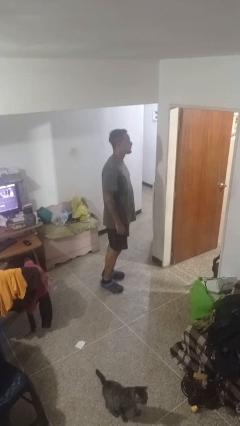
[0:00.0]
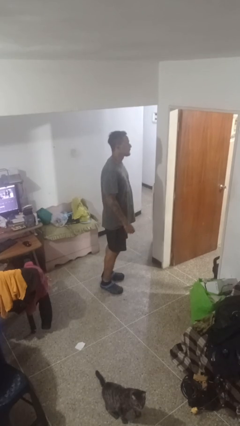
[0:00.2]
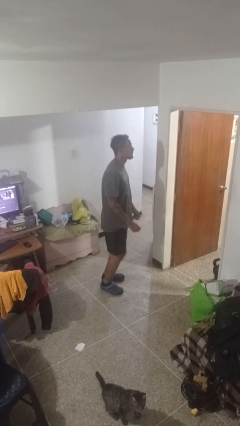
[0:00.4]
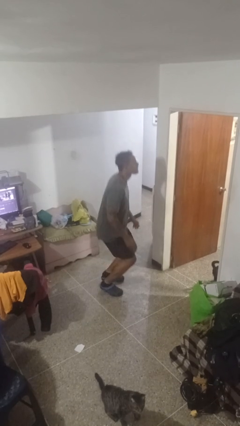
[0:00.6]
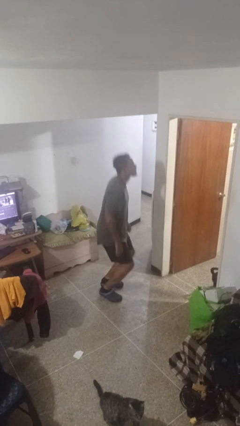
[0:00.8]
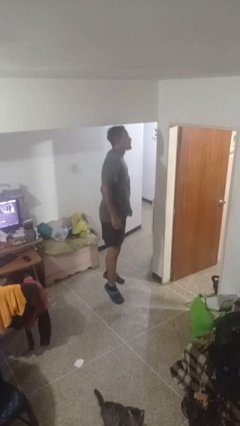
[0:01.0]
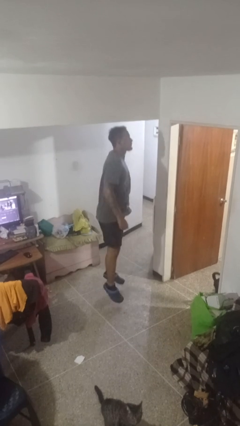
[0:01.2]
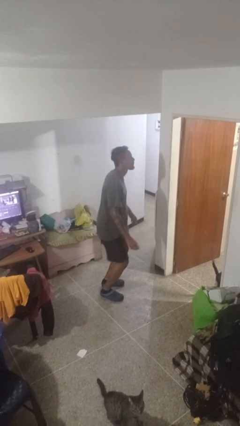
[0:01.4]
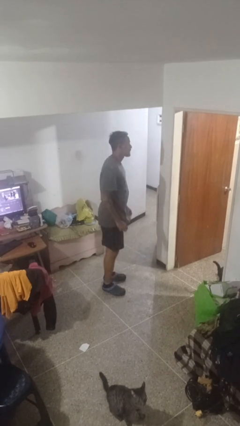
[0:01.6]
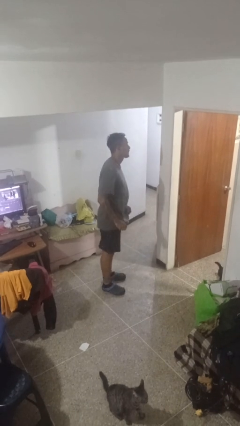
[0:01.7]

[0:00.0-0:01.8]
person jumps

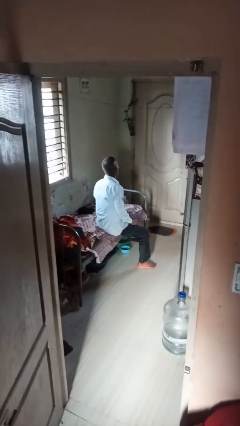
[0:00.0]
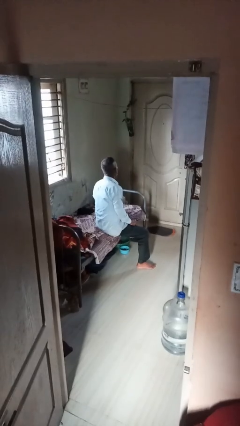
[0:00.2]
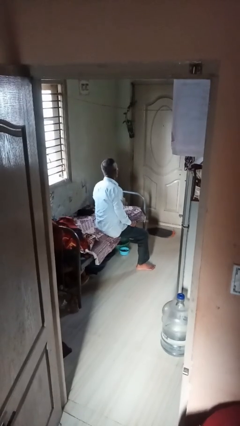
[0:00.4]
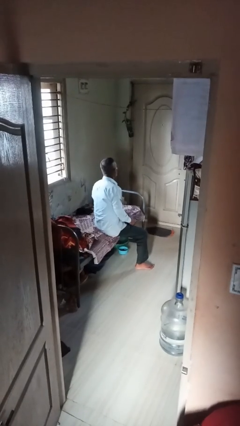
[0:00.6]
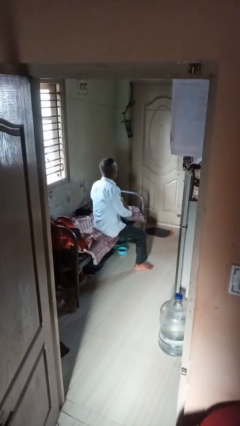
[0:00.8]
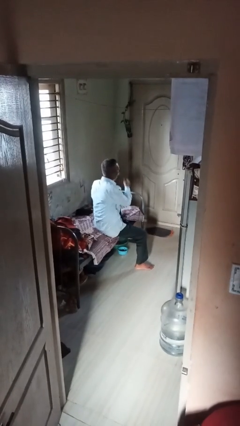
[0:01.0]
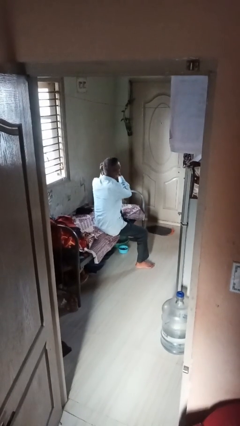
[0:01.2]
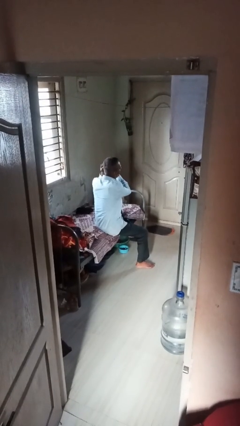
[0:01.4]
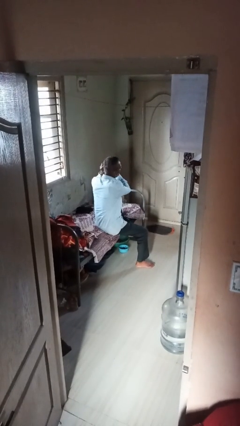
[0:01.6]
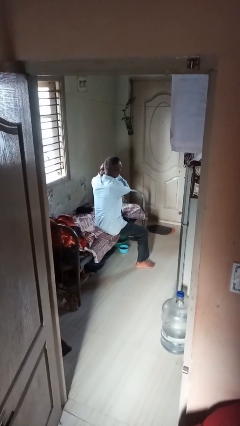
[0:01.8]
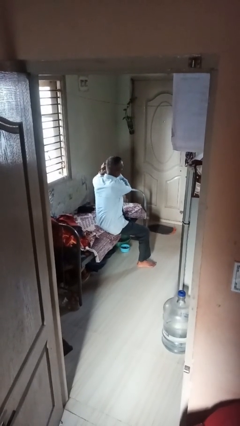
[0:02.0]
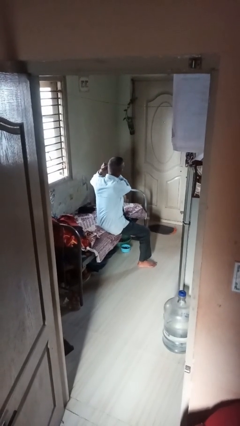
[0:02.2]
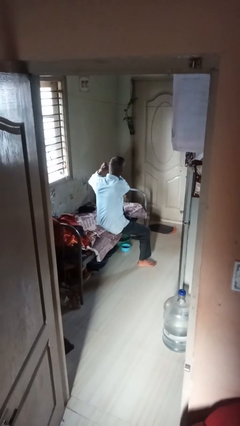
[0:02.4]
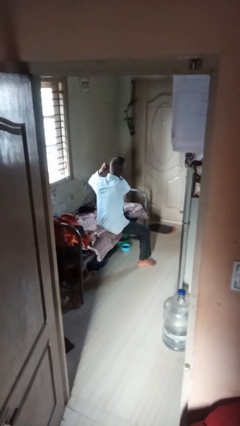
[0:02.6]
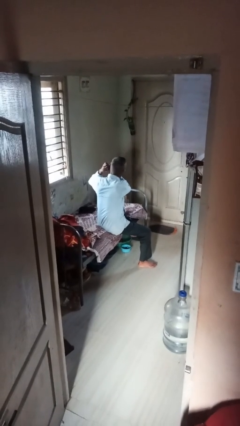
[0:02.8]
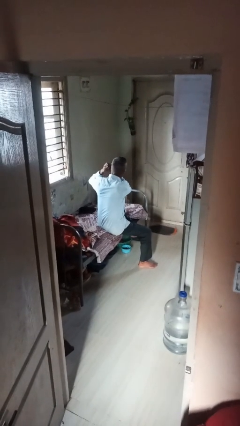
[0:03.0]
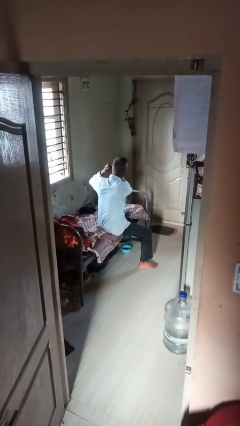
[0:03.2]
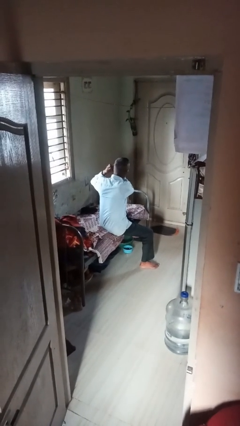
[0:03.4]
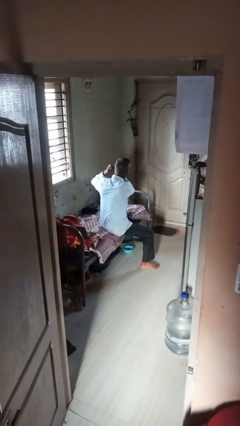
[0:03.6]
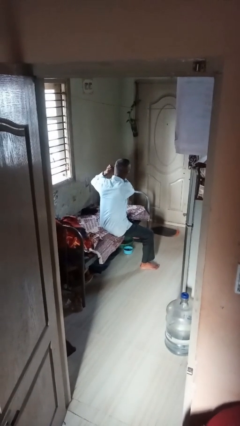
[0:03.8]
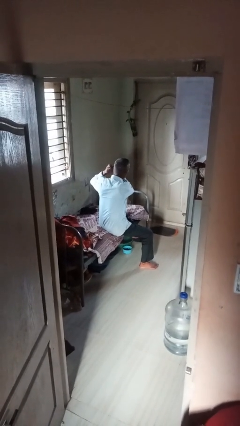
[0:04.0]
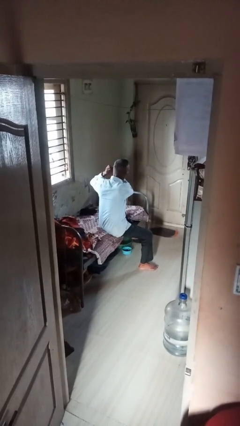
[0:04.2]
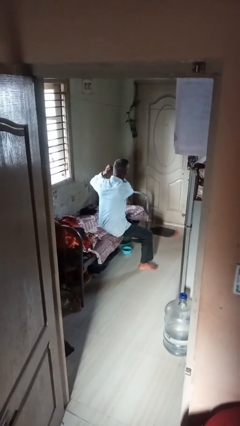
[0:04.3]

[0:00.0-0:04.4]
person puts on earrings

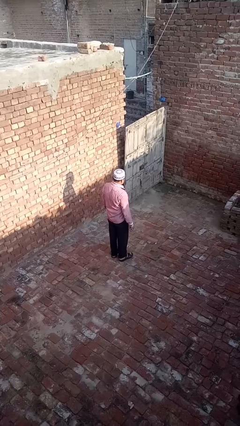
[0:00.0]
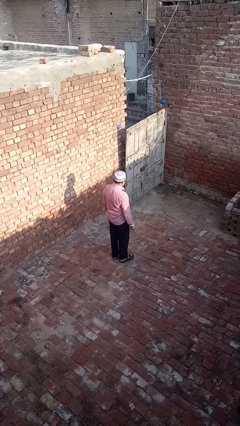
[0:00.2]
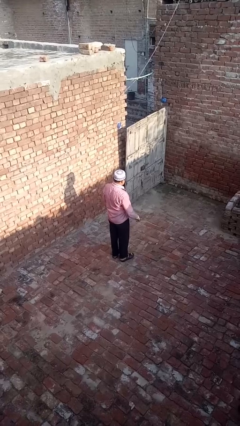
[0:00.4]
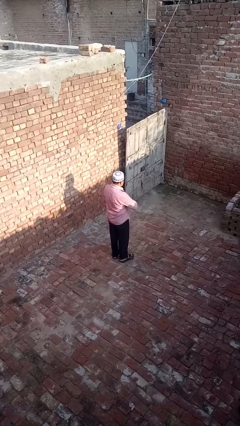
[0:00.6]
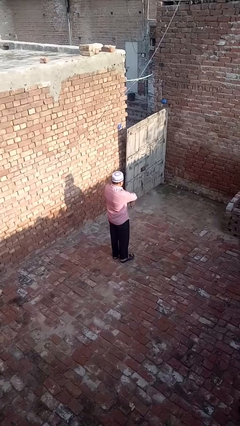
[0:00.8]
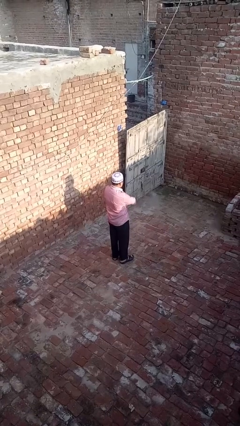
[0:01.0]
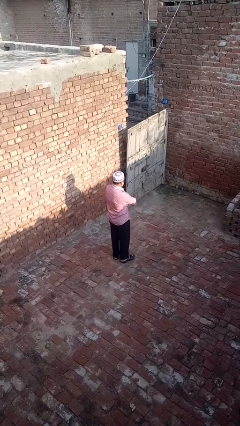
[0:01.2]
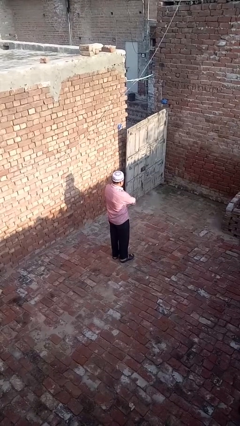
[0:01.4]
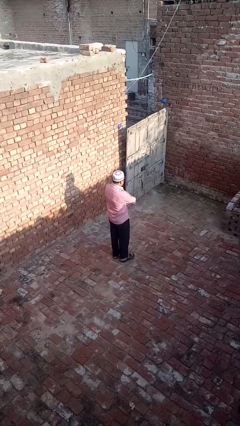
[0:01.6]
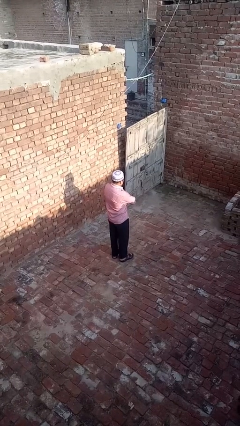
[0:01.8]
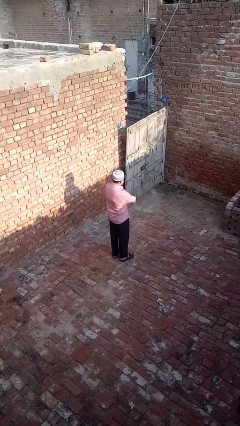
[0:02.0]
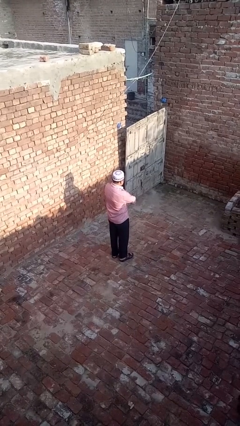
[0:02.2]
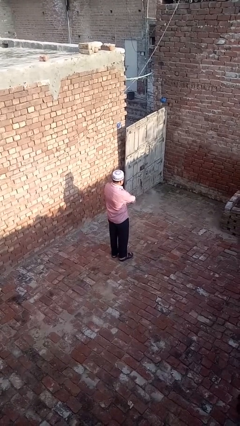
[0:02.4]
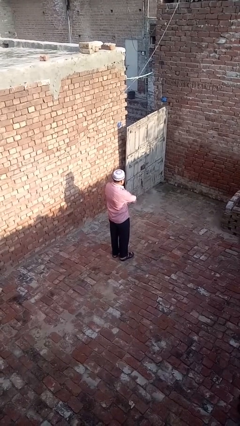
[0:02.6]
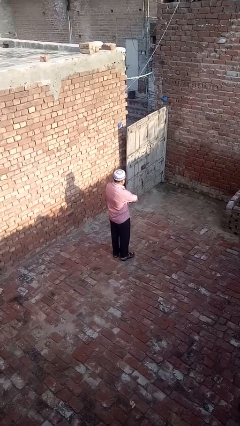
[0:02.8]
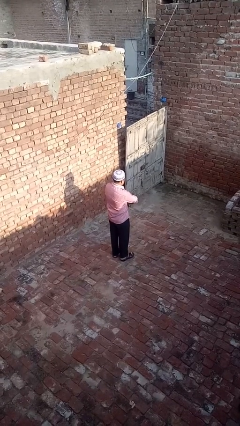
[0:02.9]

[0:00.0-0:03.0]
person crosses arms

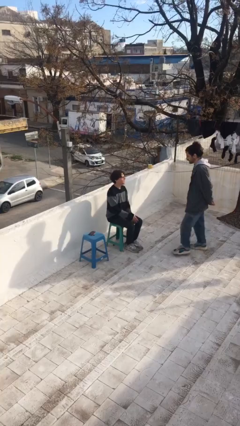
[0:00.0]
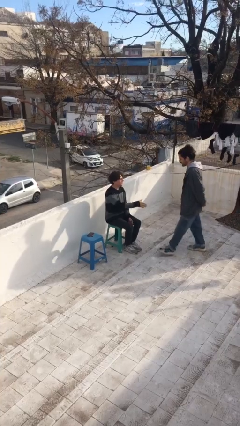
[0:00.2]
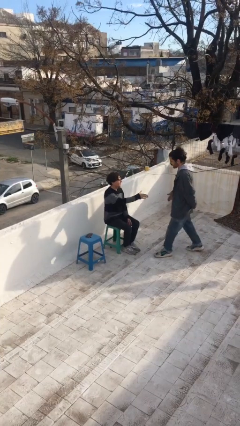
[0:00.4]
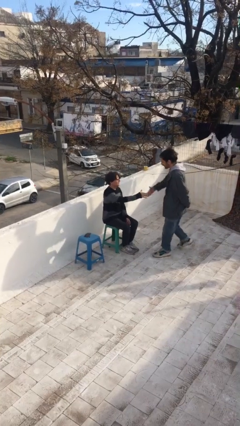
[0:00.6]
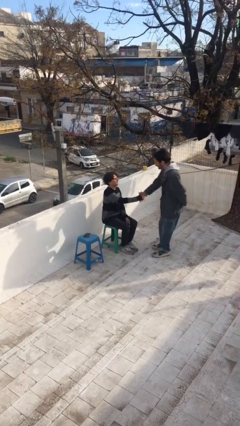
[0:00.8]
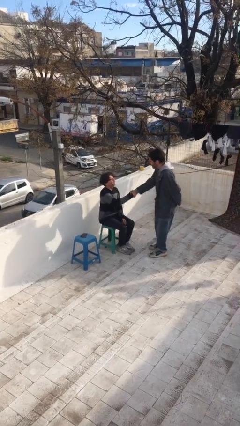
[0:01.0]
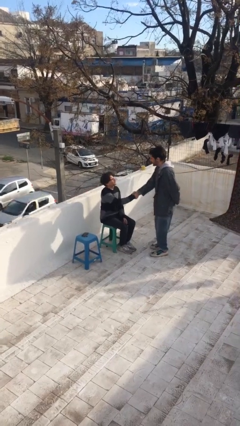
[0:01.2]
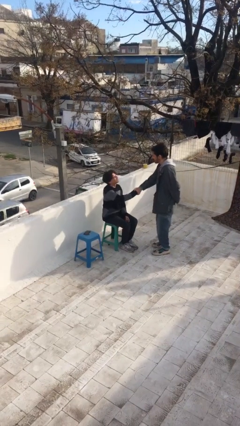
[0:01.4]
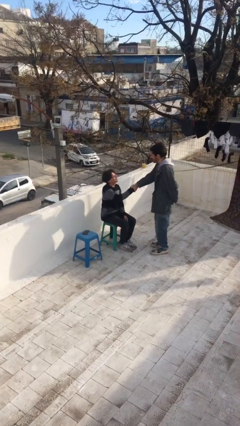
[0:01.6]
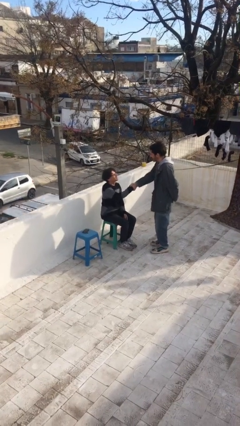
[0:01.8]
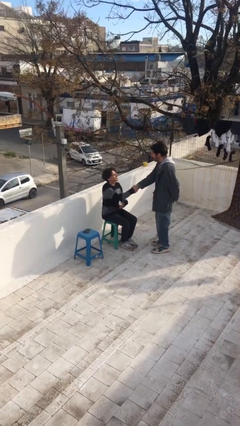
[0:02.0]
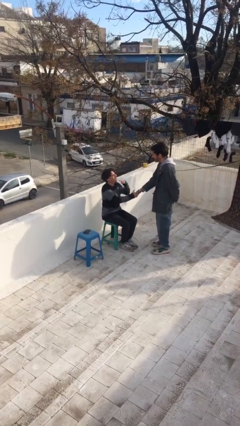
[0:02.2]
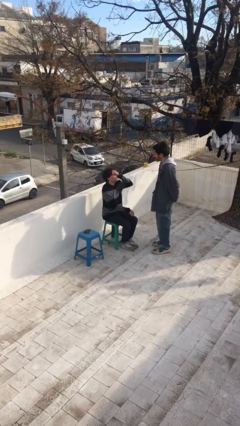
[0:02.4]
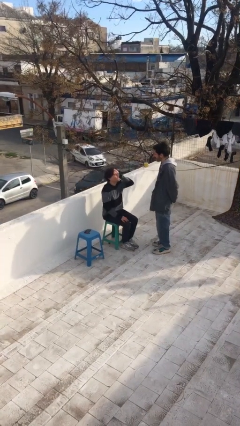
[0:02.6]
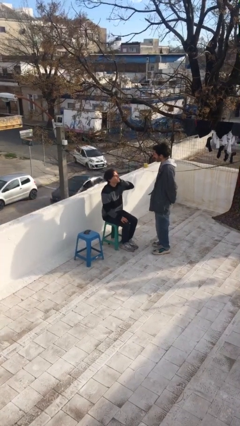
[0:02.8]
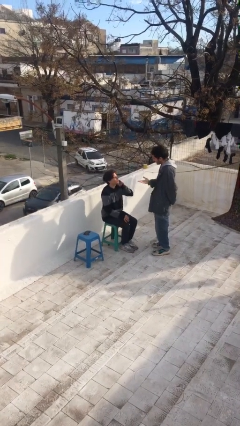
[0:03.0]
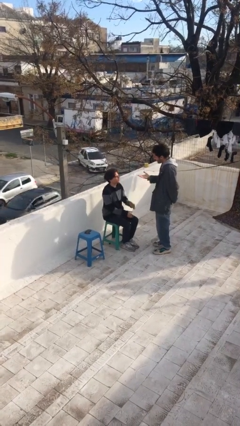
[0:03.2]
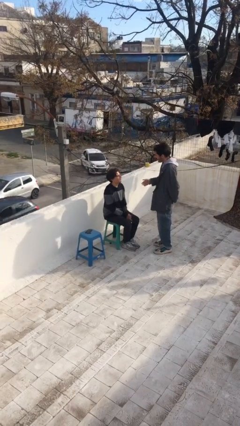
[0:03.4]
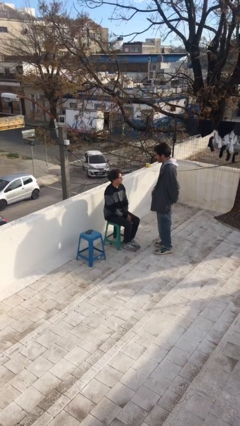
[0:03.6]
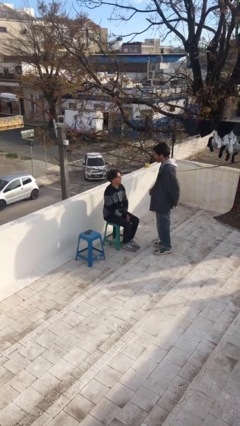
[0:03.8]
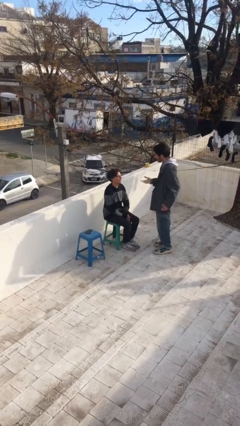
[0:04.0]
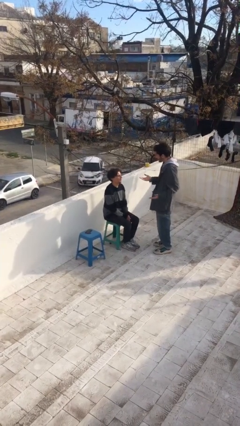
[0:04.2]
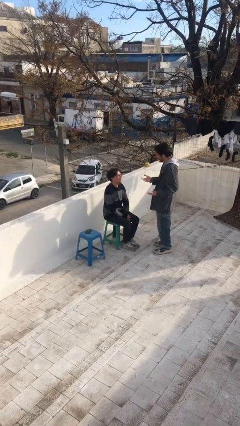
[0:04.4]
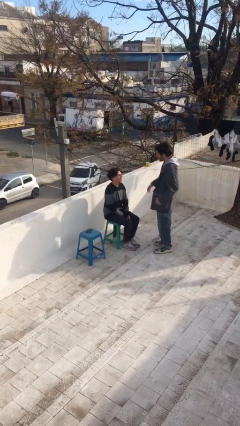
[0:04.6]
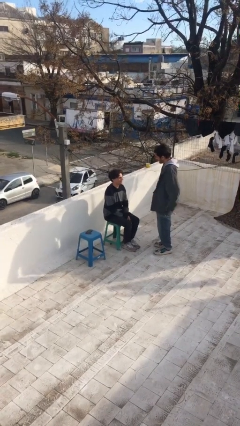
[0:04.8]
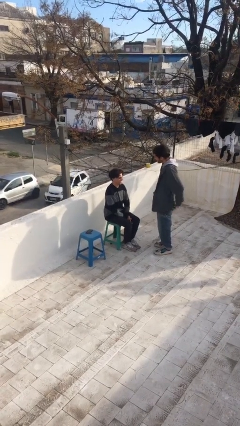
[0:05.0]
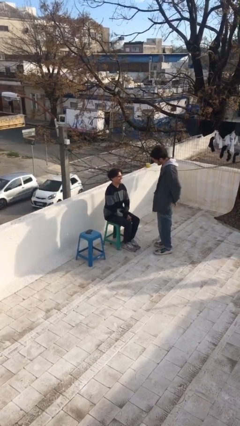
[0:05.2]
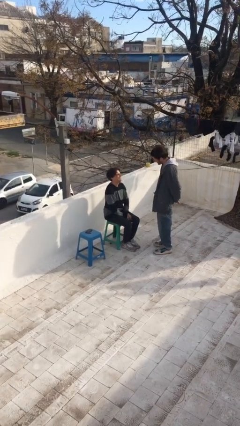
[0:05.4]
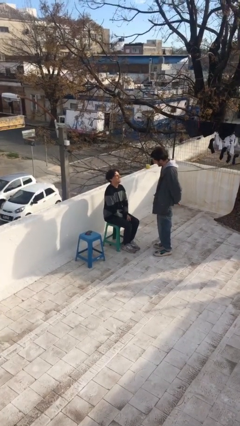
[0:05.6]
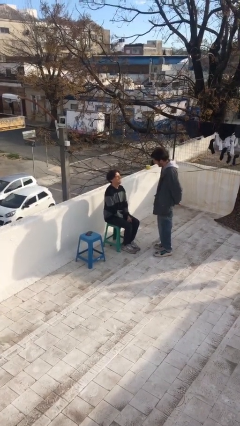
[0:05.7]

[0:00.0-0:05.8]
person shakes hand

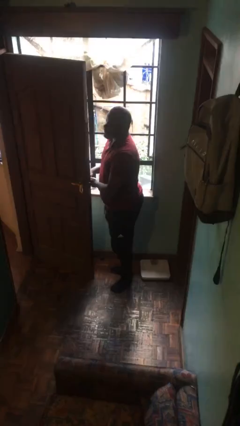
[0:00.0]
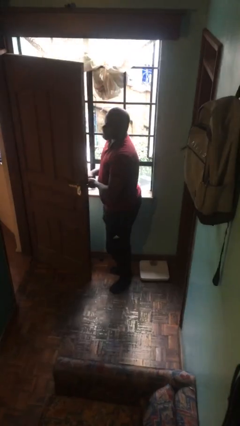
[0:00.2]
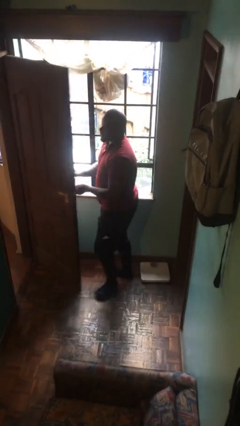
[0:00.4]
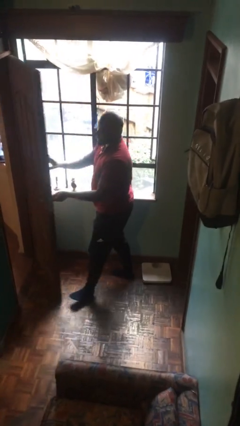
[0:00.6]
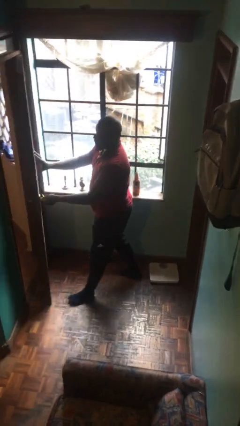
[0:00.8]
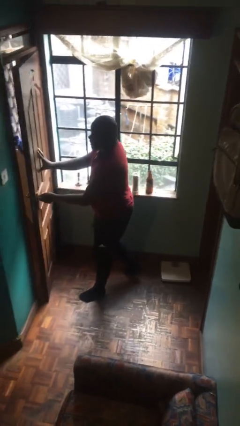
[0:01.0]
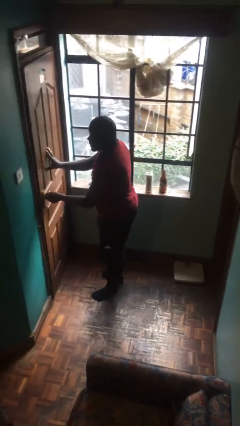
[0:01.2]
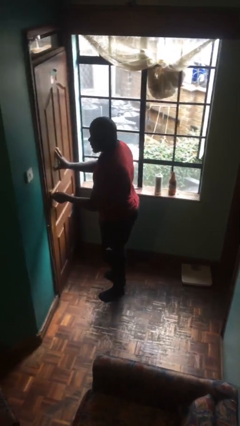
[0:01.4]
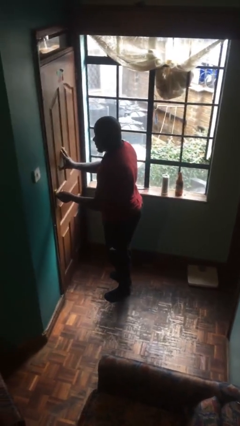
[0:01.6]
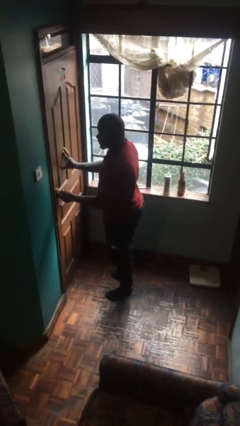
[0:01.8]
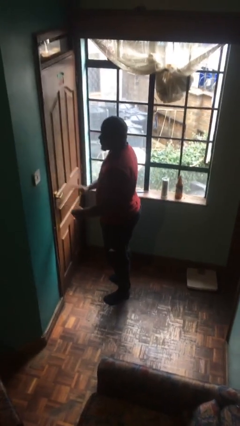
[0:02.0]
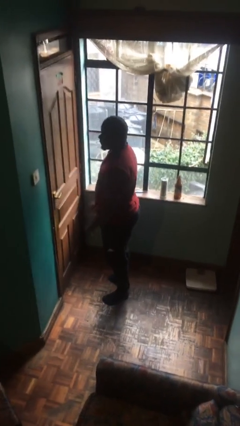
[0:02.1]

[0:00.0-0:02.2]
person closes facility door

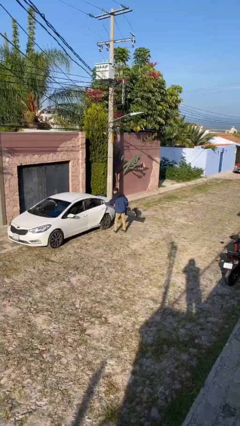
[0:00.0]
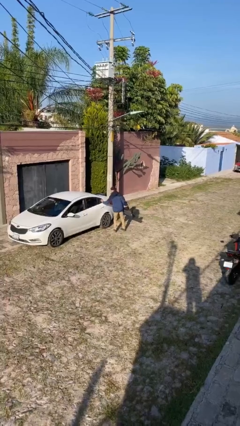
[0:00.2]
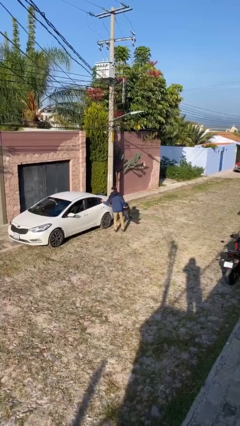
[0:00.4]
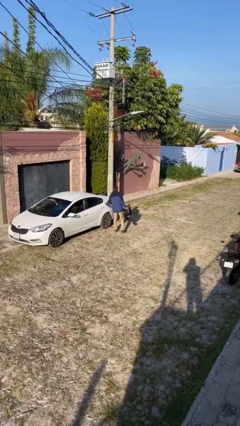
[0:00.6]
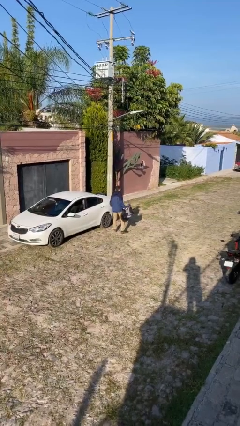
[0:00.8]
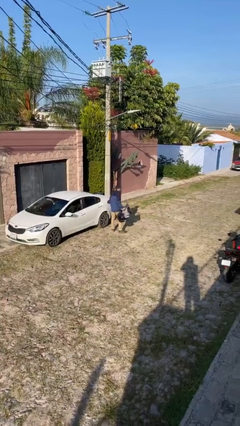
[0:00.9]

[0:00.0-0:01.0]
person closes car door
